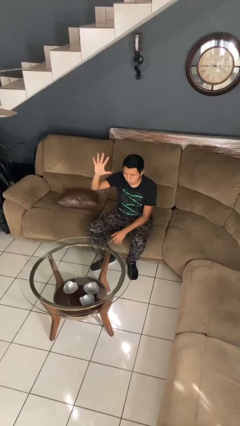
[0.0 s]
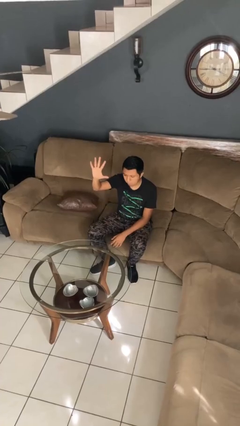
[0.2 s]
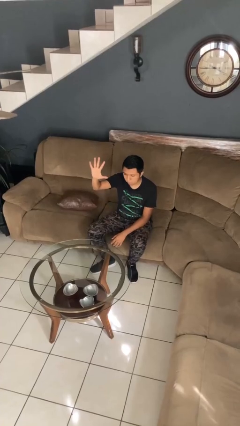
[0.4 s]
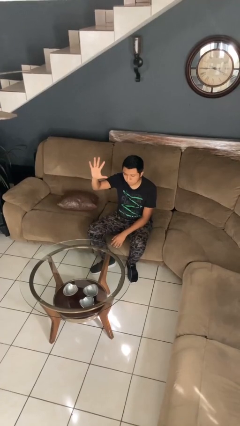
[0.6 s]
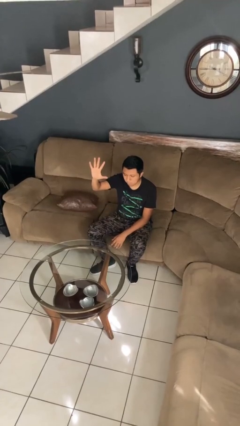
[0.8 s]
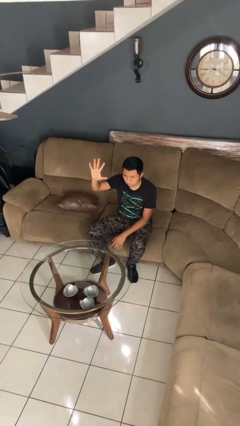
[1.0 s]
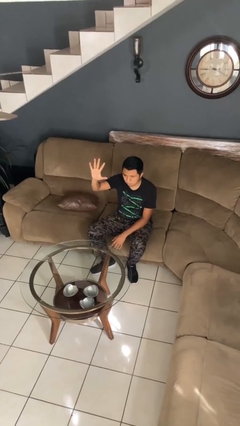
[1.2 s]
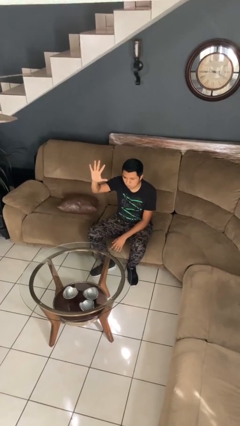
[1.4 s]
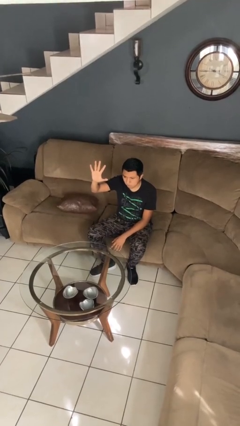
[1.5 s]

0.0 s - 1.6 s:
person gestures number five

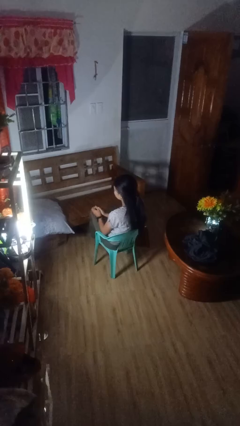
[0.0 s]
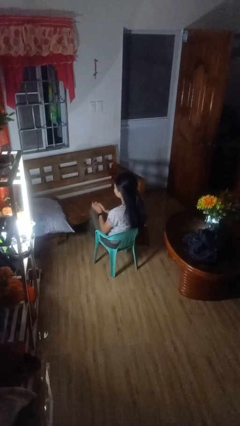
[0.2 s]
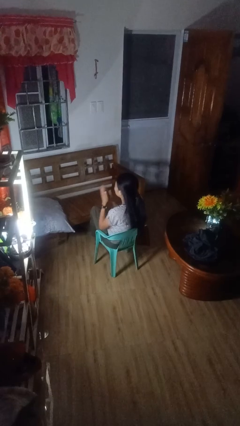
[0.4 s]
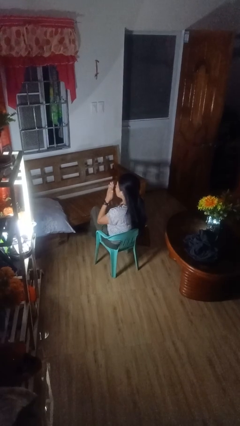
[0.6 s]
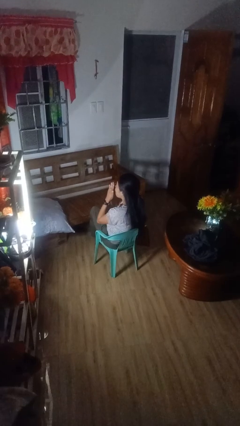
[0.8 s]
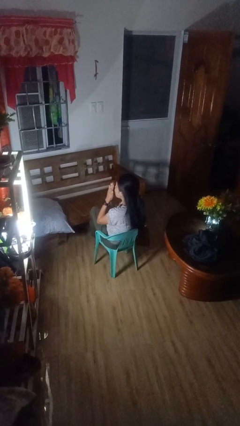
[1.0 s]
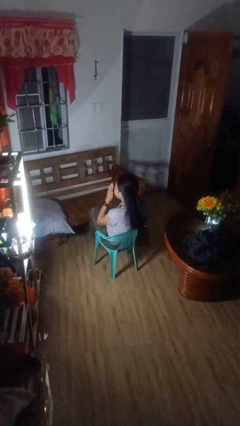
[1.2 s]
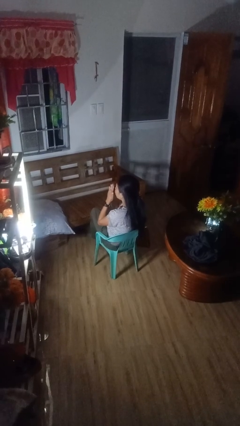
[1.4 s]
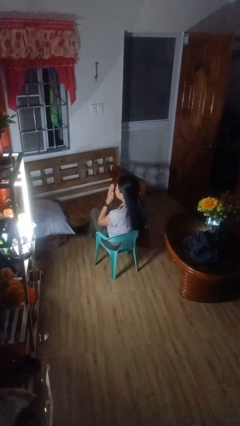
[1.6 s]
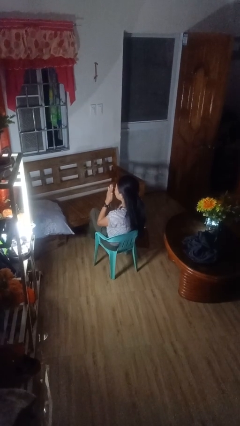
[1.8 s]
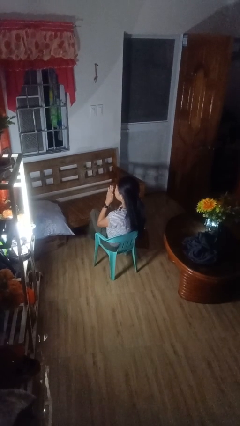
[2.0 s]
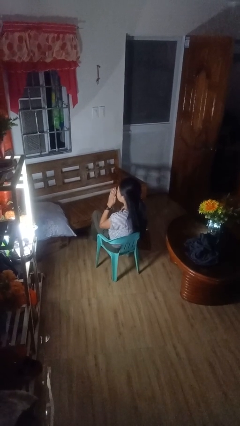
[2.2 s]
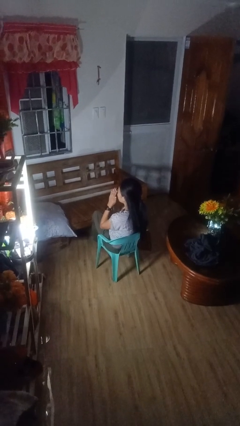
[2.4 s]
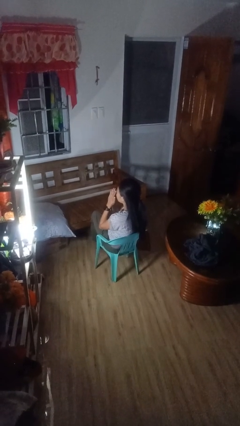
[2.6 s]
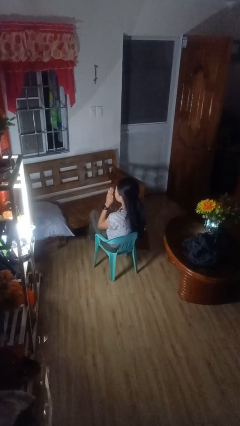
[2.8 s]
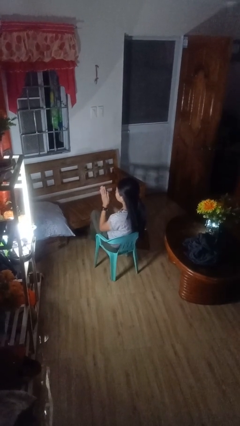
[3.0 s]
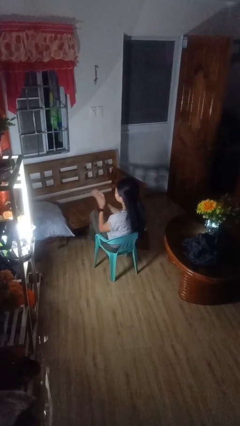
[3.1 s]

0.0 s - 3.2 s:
person blows into hands

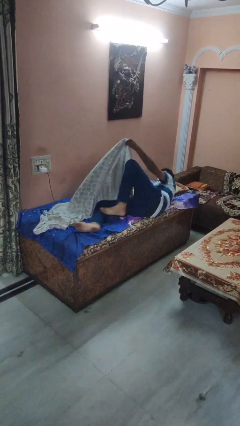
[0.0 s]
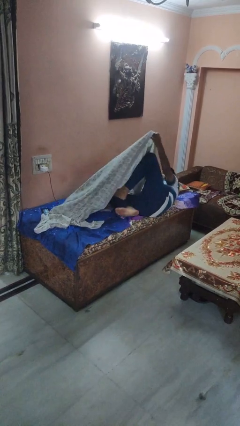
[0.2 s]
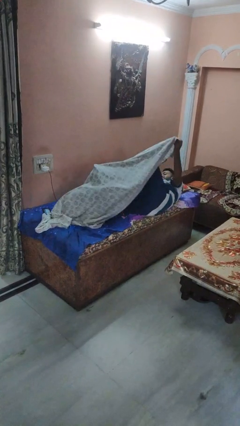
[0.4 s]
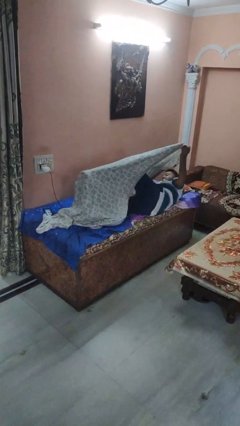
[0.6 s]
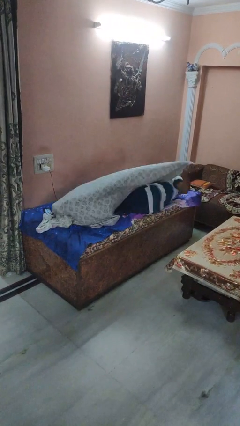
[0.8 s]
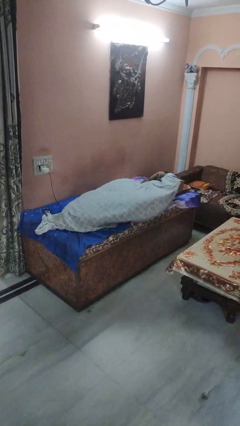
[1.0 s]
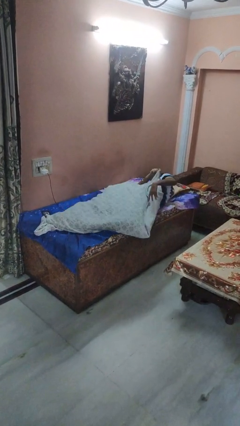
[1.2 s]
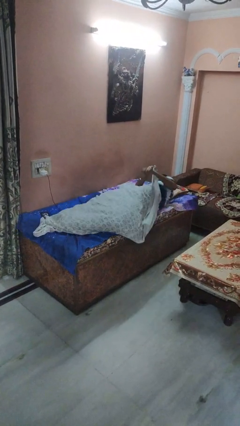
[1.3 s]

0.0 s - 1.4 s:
person covers with bedsheets

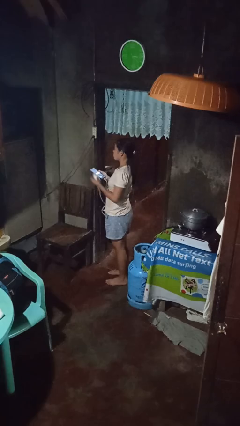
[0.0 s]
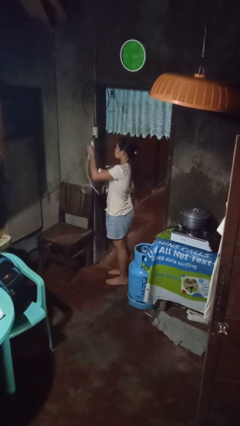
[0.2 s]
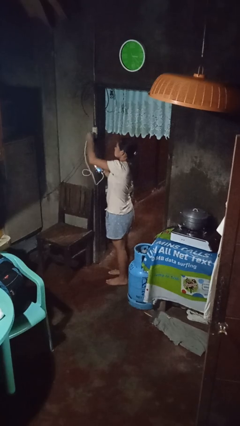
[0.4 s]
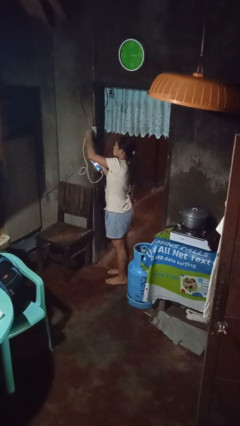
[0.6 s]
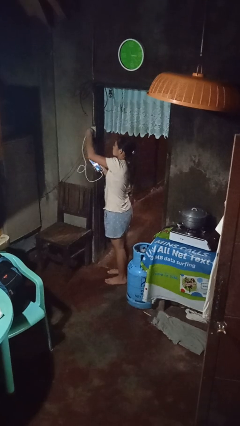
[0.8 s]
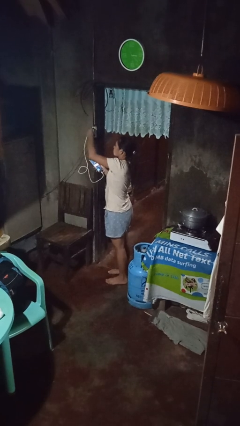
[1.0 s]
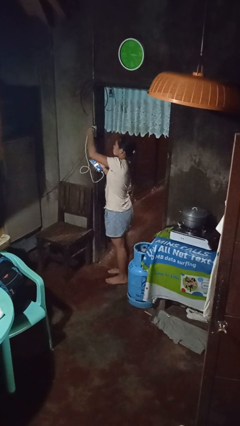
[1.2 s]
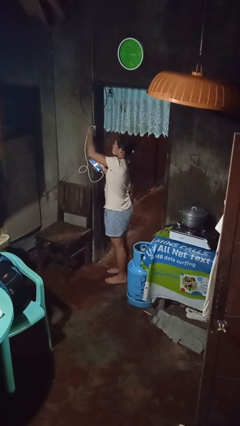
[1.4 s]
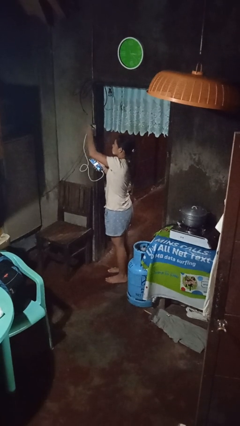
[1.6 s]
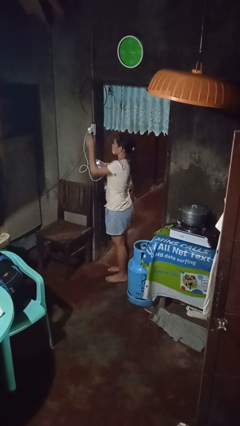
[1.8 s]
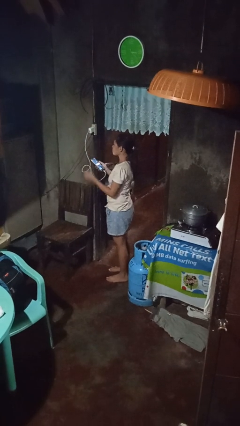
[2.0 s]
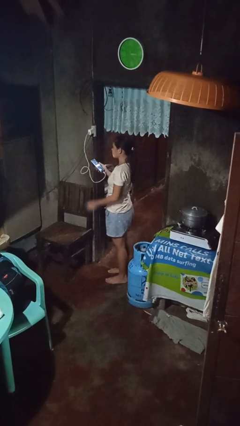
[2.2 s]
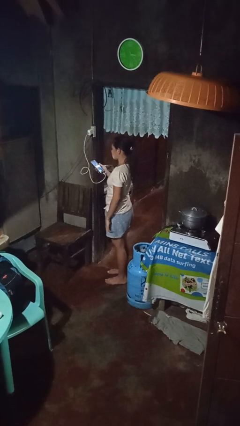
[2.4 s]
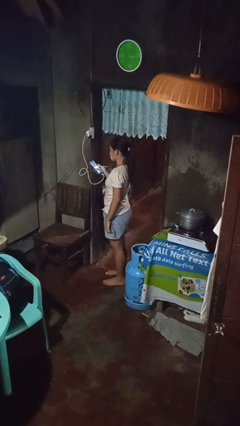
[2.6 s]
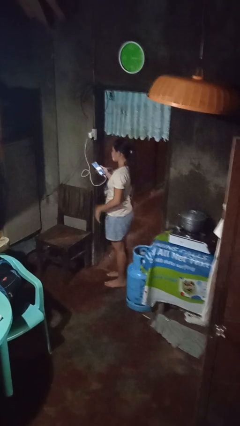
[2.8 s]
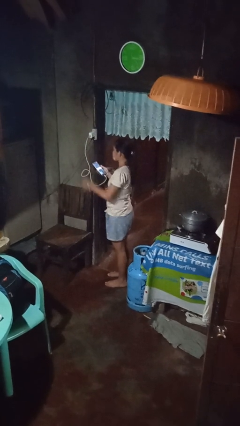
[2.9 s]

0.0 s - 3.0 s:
person plugs into electrical socket

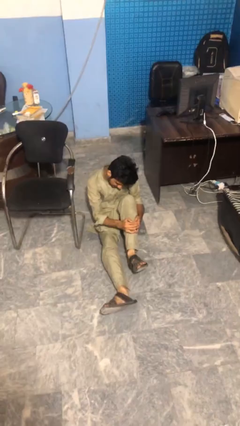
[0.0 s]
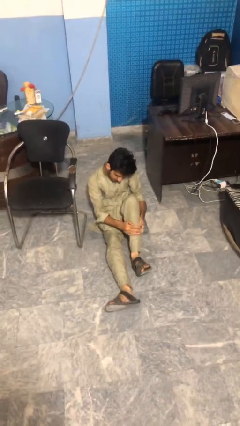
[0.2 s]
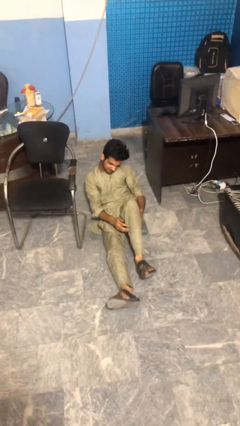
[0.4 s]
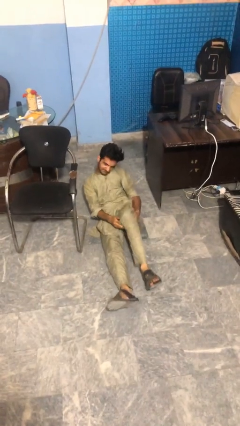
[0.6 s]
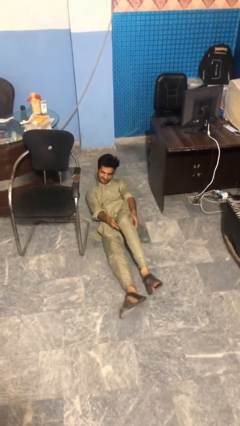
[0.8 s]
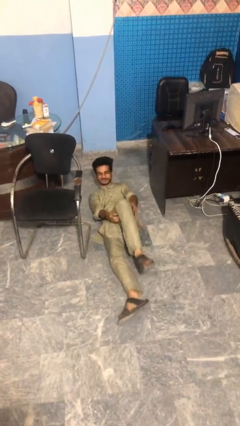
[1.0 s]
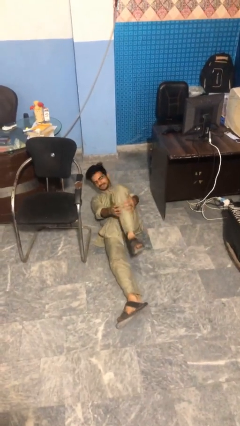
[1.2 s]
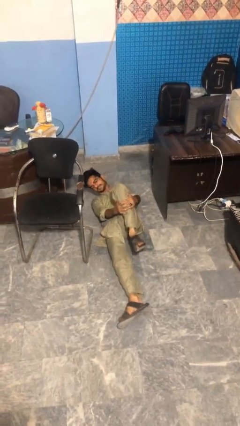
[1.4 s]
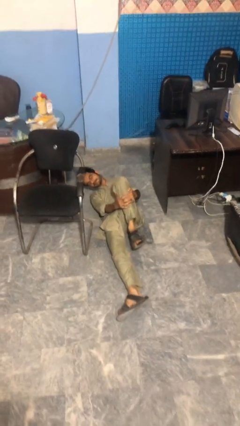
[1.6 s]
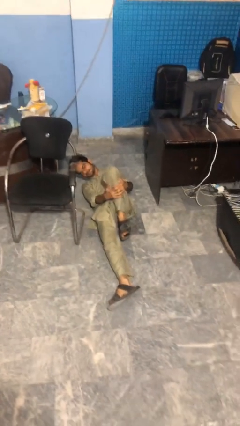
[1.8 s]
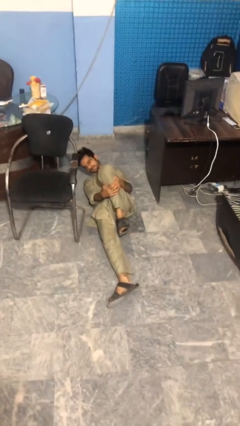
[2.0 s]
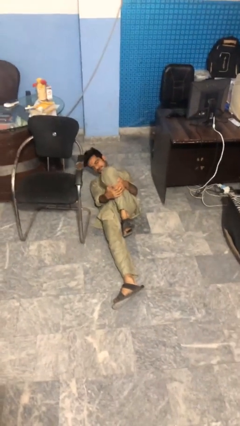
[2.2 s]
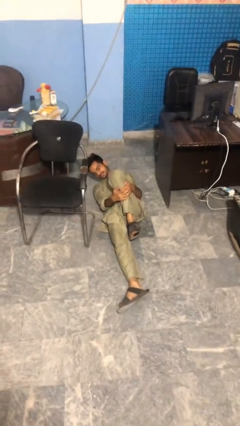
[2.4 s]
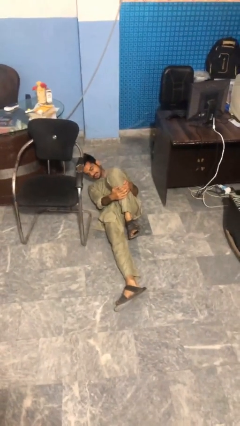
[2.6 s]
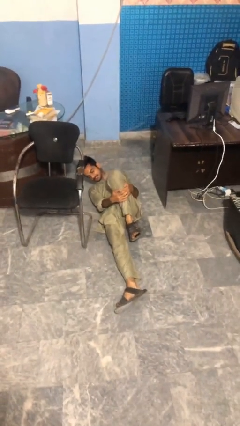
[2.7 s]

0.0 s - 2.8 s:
person lies down on floor

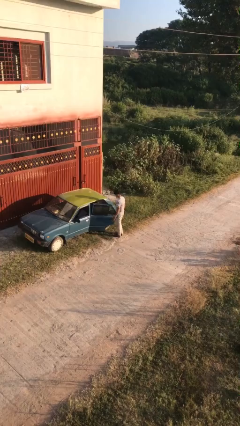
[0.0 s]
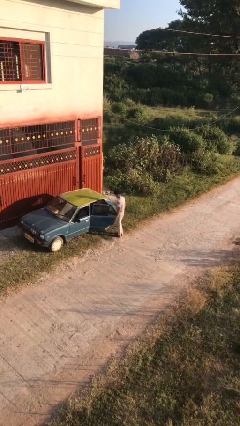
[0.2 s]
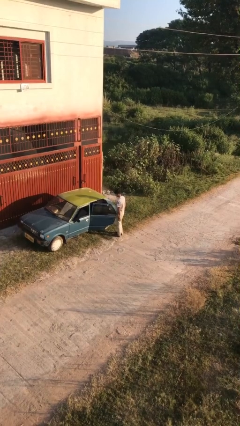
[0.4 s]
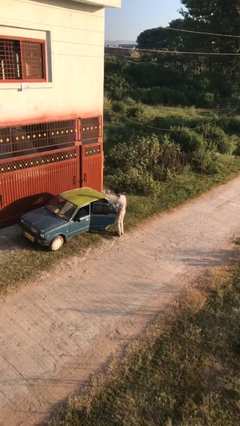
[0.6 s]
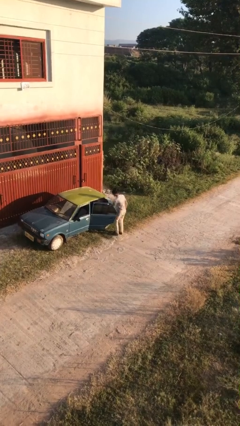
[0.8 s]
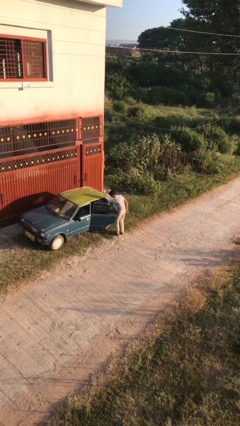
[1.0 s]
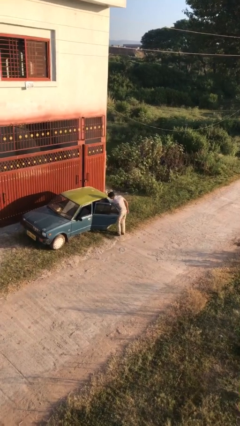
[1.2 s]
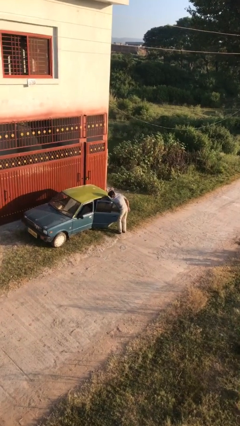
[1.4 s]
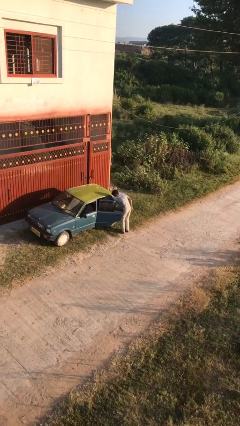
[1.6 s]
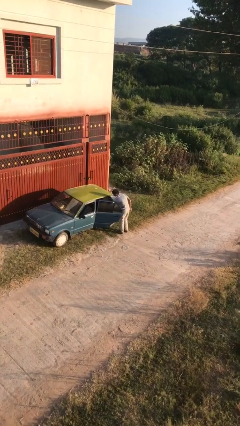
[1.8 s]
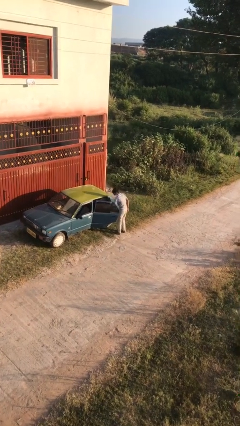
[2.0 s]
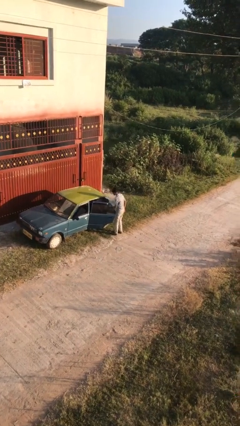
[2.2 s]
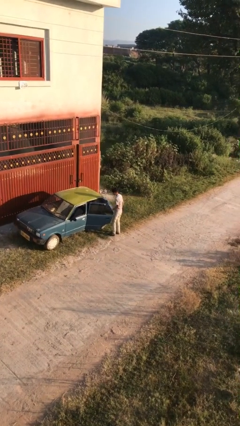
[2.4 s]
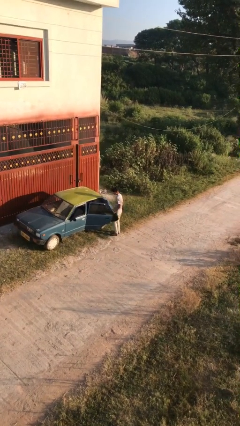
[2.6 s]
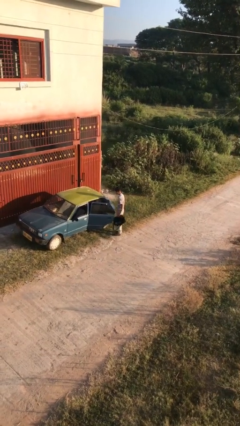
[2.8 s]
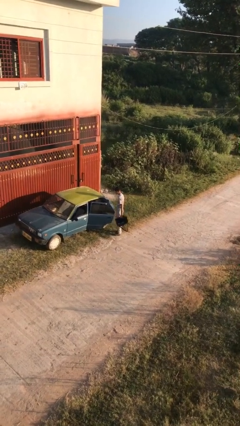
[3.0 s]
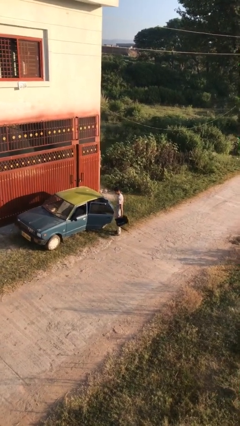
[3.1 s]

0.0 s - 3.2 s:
person unloads car

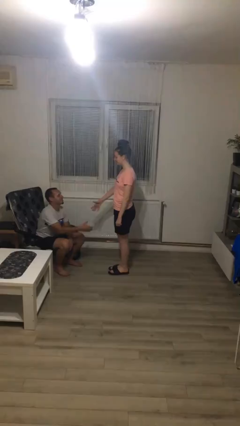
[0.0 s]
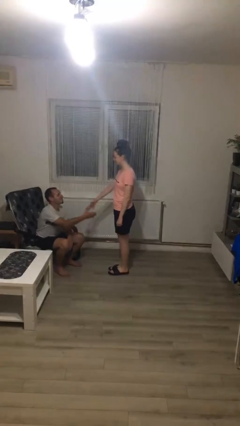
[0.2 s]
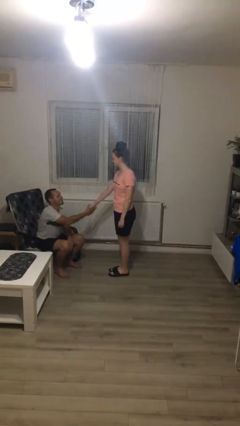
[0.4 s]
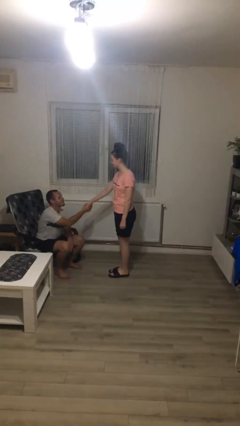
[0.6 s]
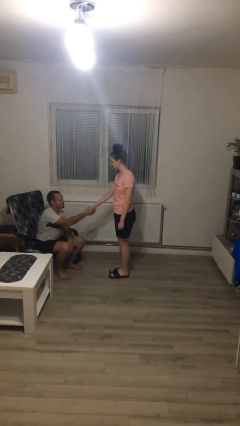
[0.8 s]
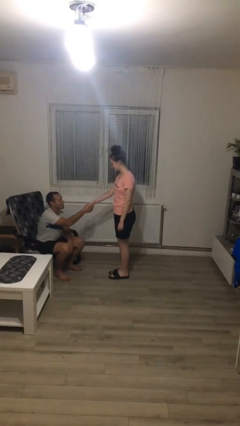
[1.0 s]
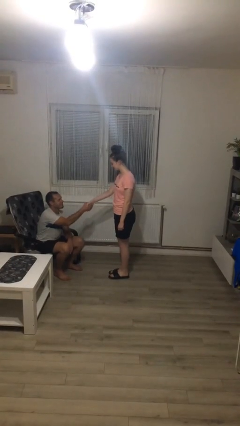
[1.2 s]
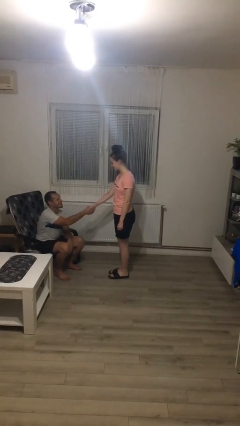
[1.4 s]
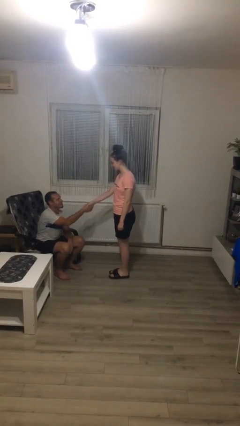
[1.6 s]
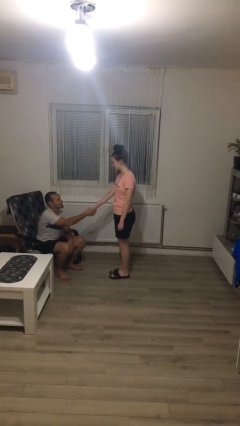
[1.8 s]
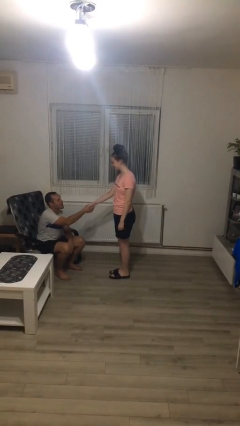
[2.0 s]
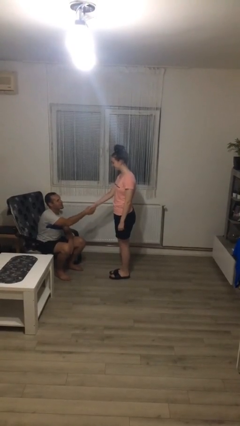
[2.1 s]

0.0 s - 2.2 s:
person shakes hand
